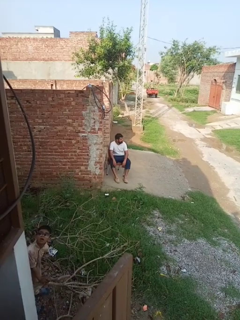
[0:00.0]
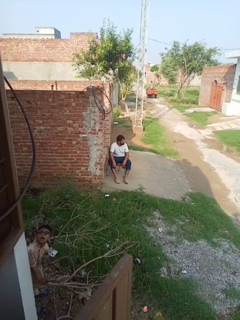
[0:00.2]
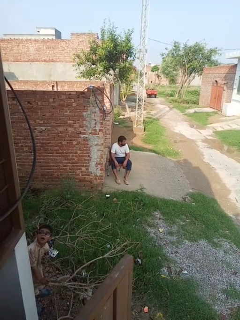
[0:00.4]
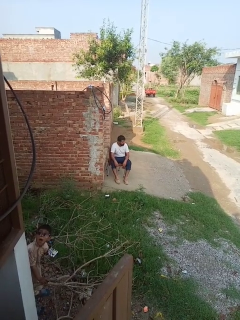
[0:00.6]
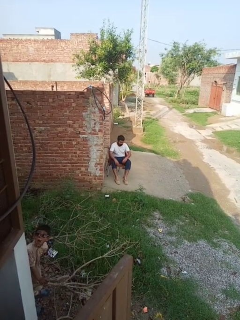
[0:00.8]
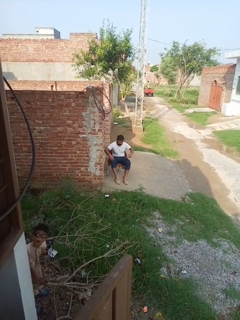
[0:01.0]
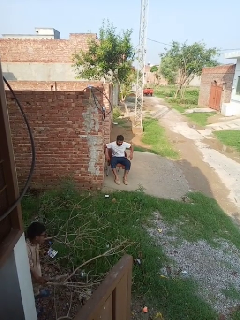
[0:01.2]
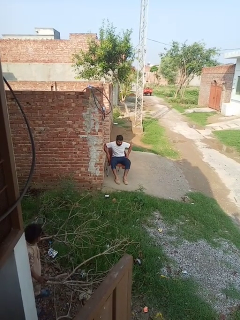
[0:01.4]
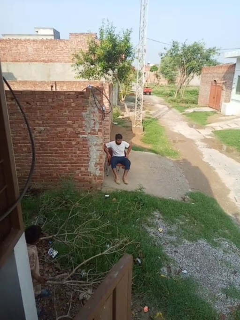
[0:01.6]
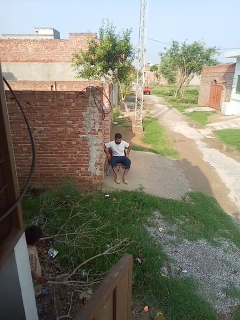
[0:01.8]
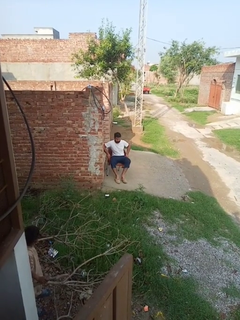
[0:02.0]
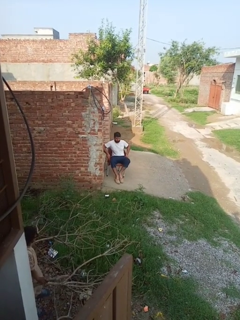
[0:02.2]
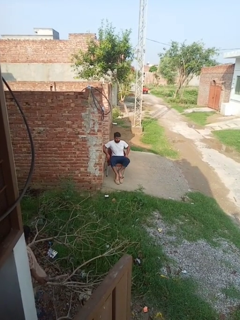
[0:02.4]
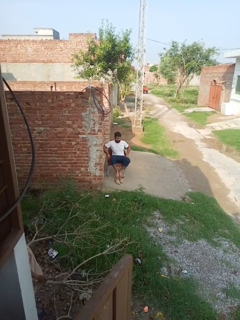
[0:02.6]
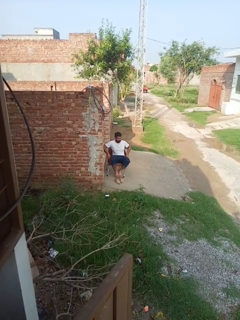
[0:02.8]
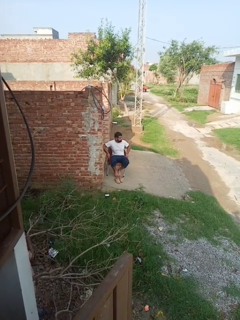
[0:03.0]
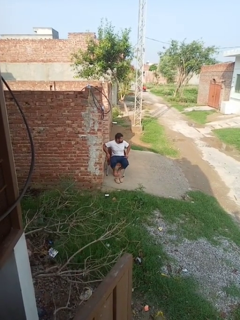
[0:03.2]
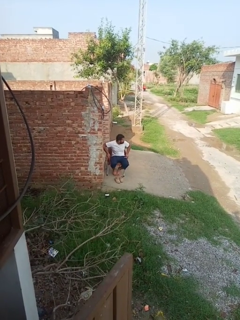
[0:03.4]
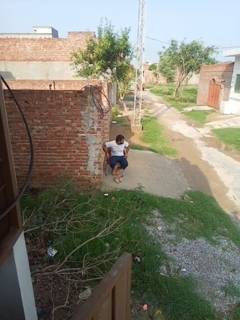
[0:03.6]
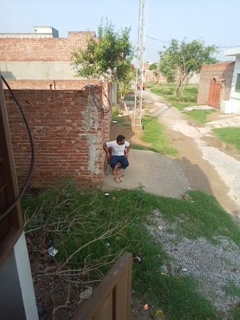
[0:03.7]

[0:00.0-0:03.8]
person takes off shoes

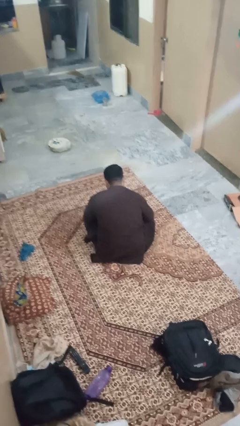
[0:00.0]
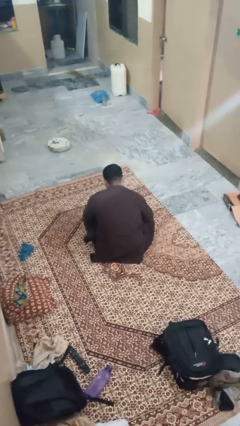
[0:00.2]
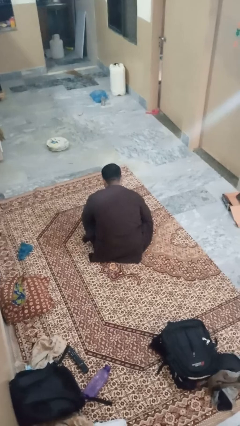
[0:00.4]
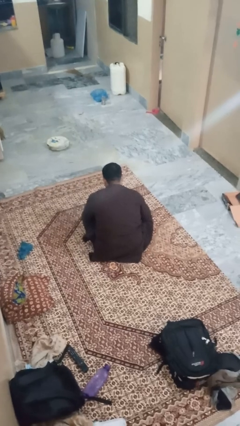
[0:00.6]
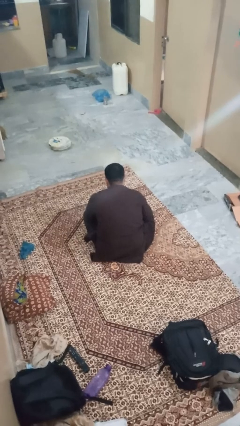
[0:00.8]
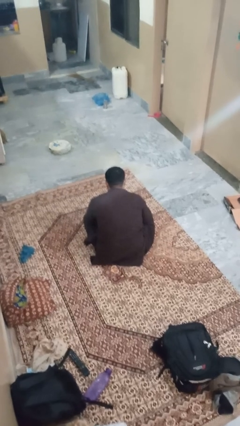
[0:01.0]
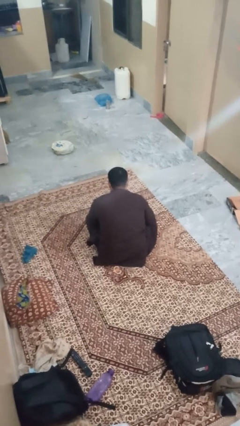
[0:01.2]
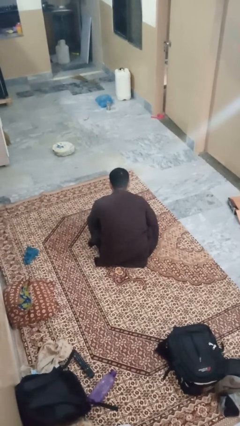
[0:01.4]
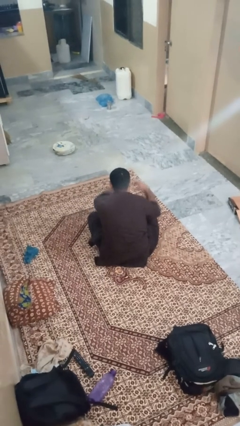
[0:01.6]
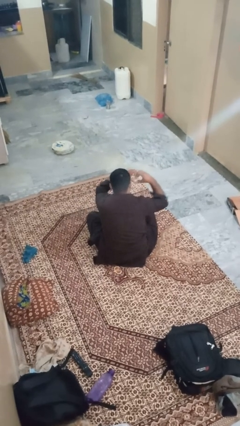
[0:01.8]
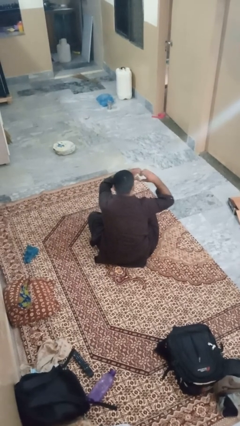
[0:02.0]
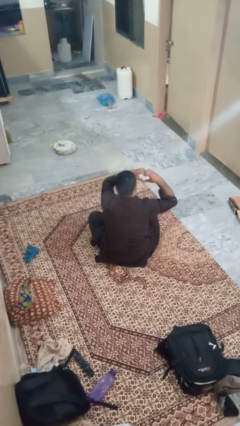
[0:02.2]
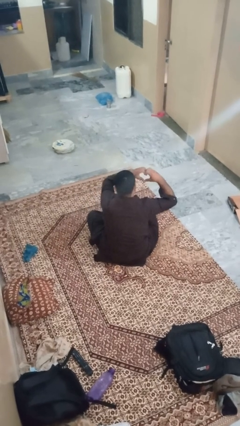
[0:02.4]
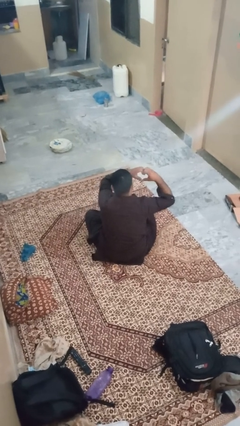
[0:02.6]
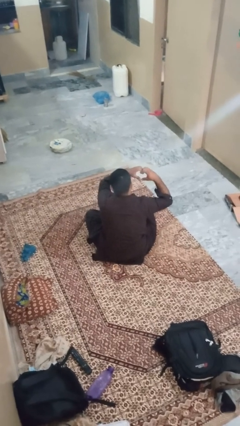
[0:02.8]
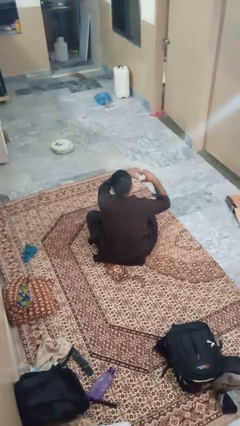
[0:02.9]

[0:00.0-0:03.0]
person gestures heart

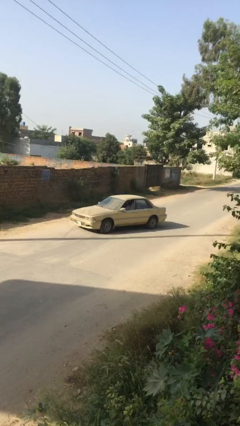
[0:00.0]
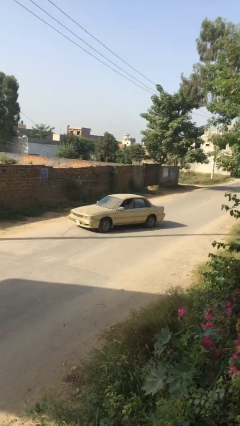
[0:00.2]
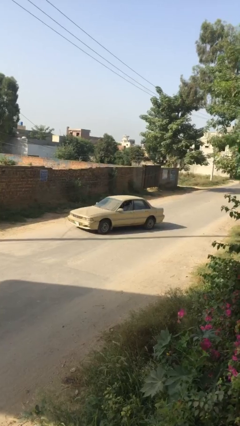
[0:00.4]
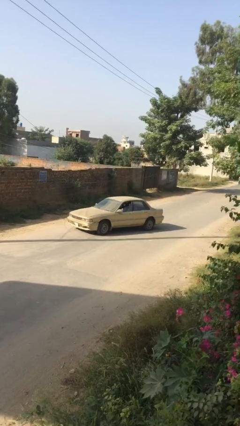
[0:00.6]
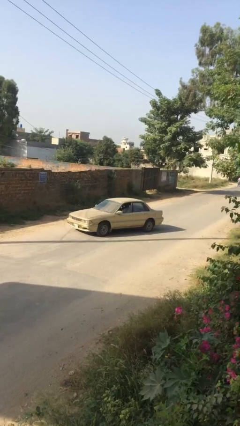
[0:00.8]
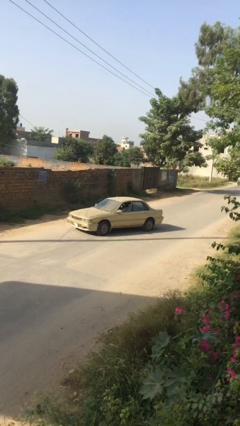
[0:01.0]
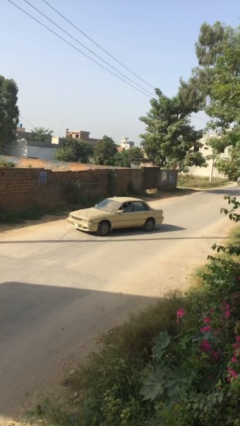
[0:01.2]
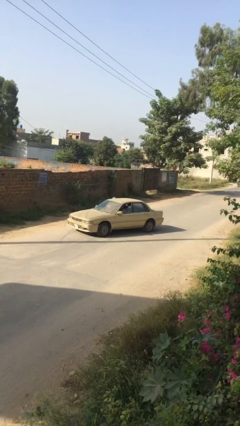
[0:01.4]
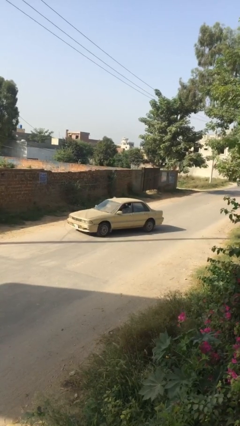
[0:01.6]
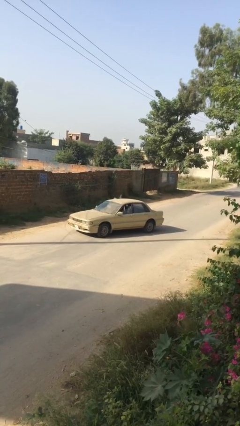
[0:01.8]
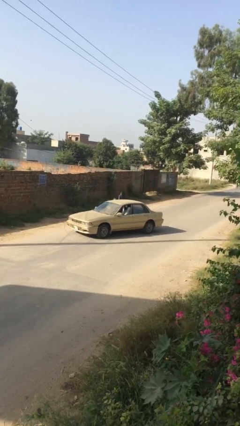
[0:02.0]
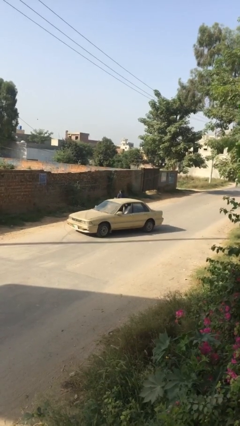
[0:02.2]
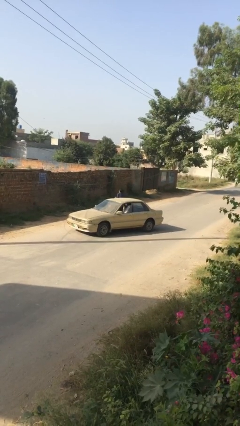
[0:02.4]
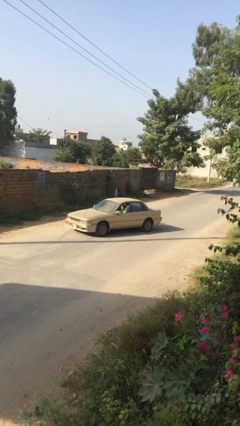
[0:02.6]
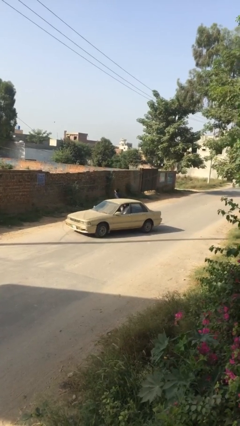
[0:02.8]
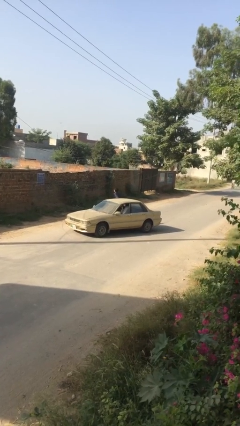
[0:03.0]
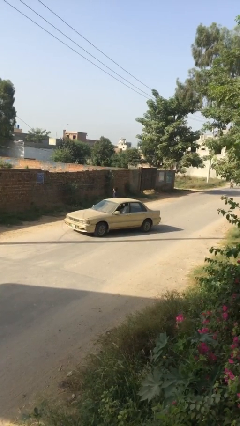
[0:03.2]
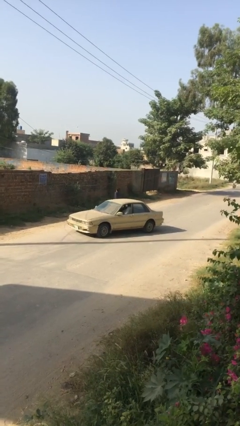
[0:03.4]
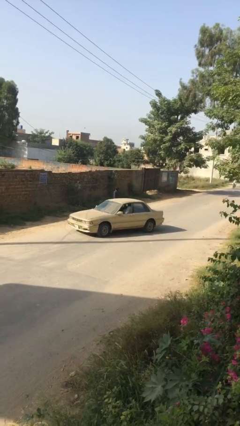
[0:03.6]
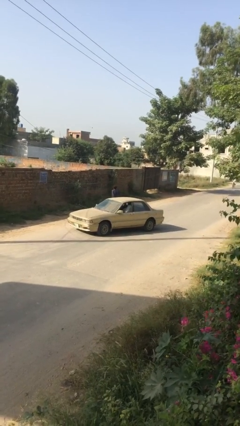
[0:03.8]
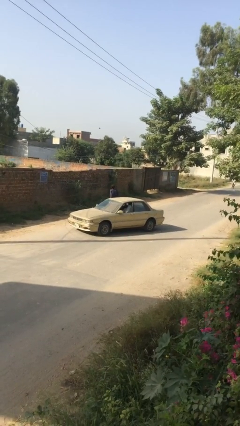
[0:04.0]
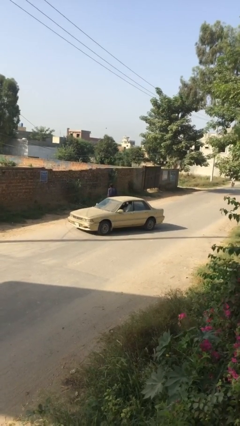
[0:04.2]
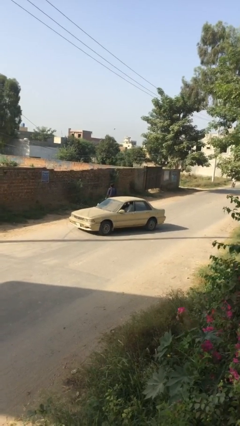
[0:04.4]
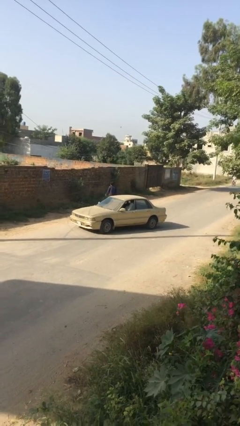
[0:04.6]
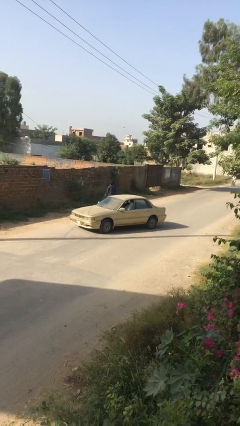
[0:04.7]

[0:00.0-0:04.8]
car drops off person

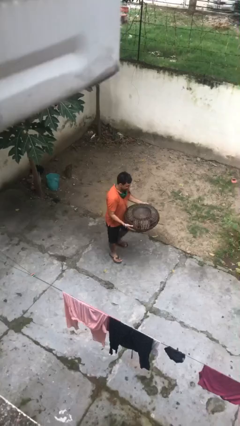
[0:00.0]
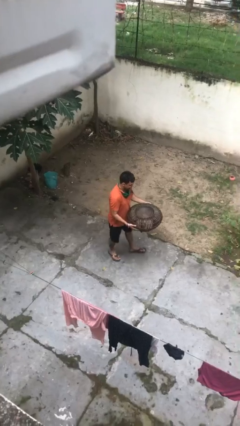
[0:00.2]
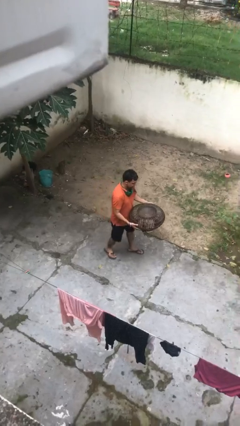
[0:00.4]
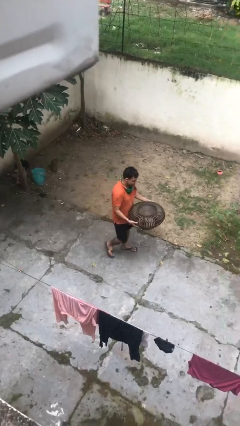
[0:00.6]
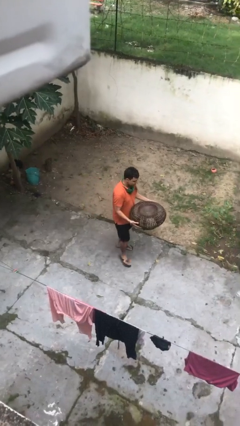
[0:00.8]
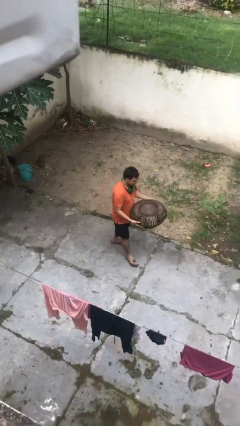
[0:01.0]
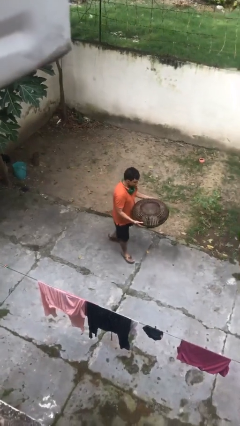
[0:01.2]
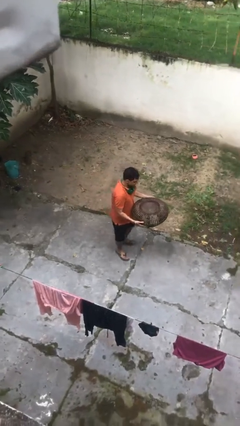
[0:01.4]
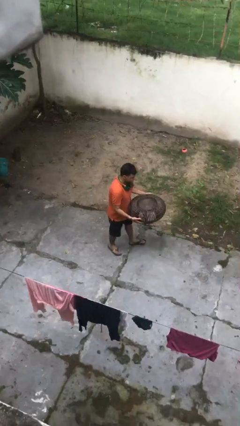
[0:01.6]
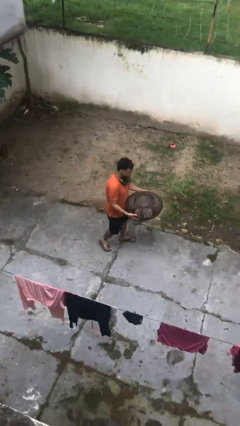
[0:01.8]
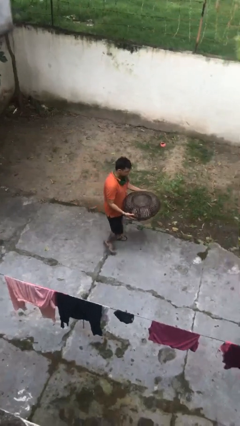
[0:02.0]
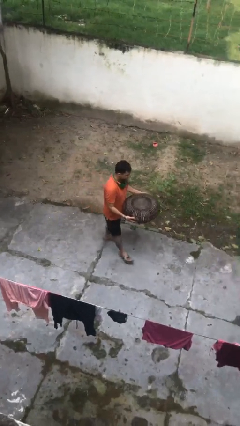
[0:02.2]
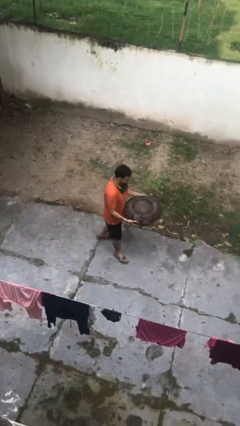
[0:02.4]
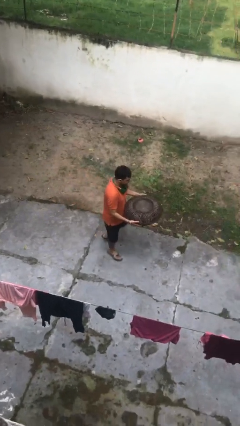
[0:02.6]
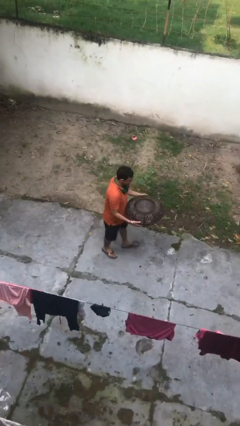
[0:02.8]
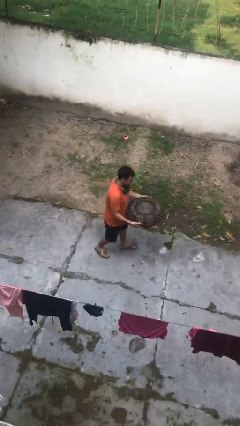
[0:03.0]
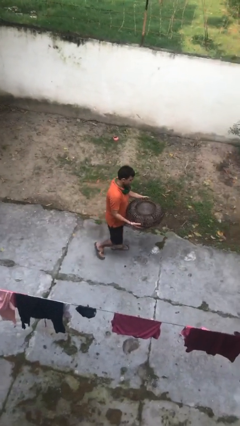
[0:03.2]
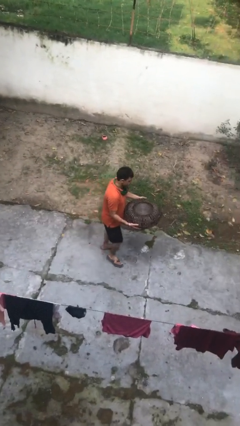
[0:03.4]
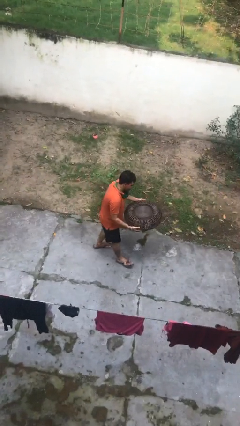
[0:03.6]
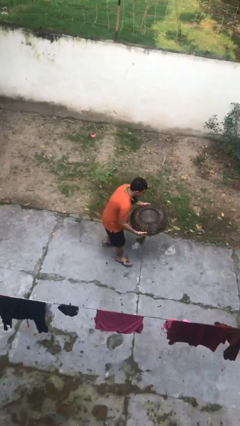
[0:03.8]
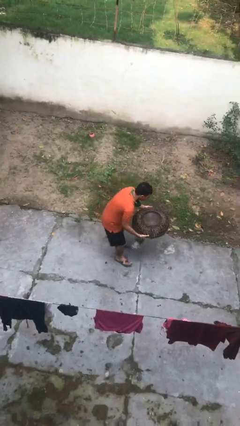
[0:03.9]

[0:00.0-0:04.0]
person carries heavy object

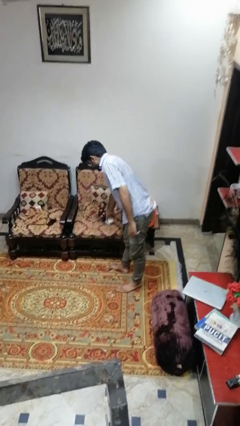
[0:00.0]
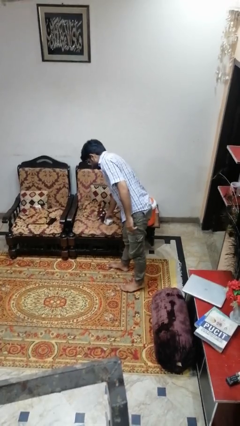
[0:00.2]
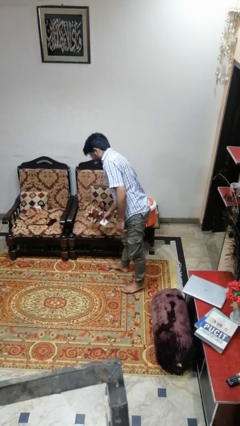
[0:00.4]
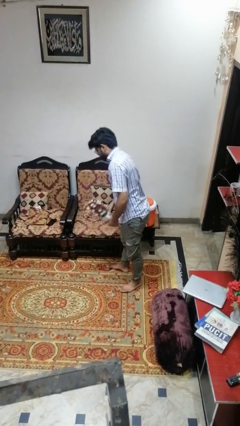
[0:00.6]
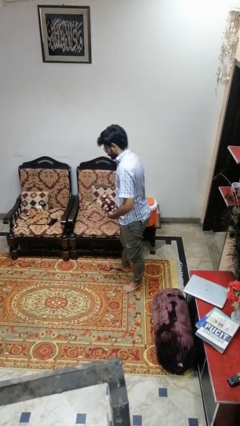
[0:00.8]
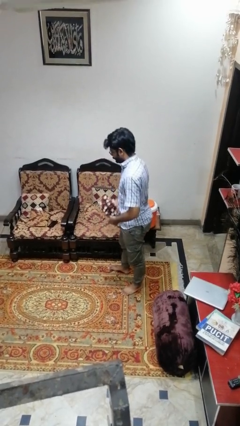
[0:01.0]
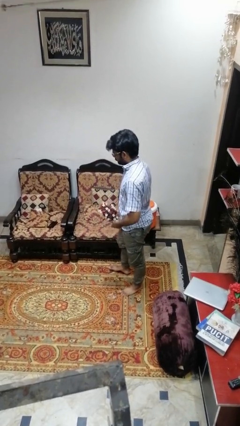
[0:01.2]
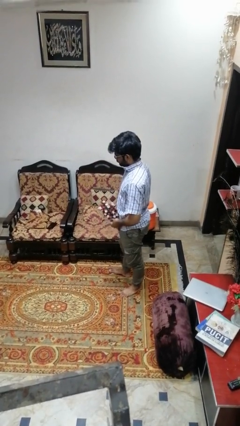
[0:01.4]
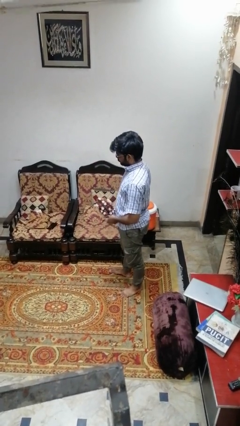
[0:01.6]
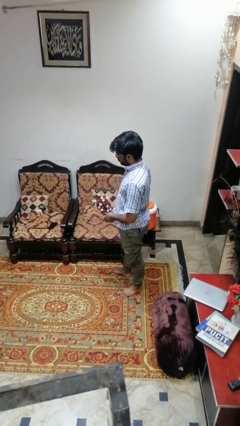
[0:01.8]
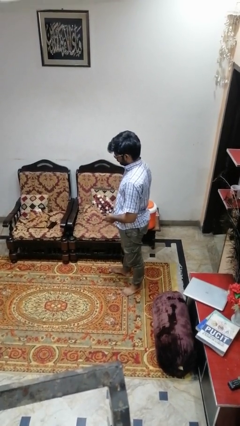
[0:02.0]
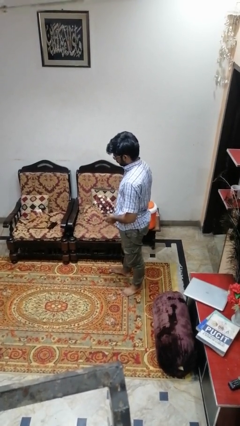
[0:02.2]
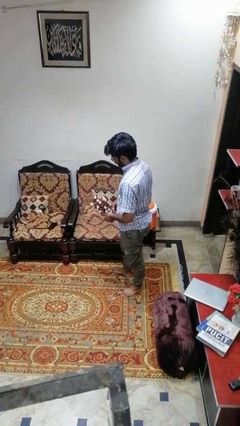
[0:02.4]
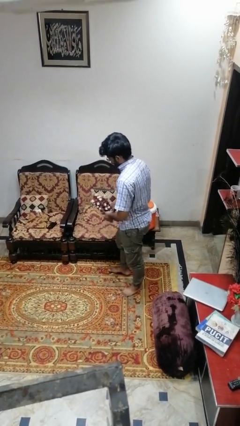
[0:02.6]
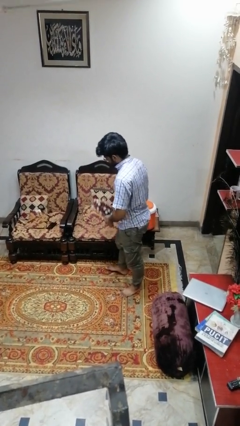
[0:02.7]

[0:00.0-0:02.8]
person picks up object from couch
